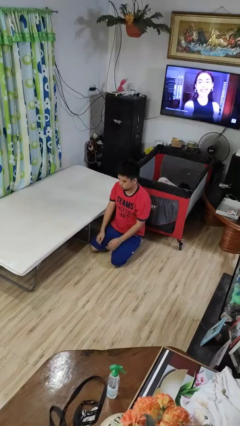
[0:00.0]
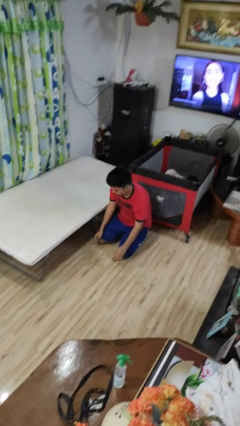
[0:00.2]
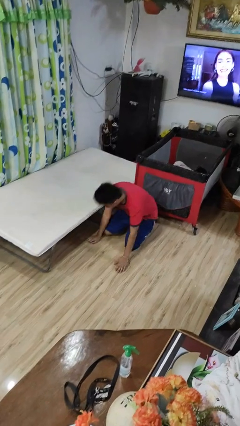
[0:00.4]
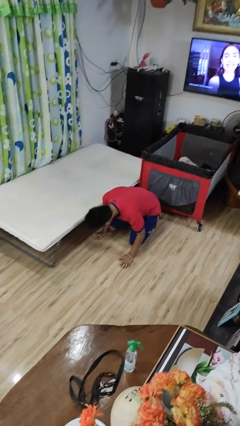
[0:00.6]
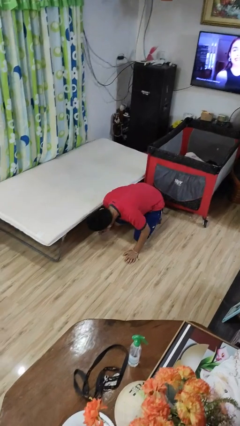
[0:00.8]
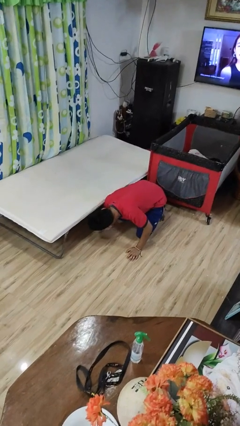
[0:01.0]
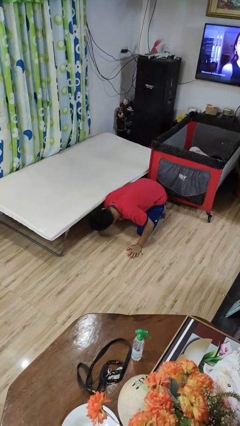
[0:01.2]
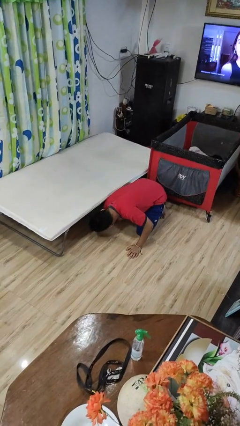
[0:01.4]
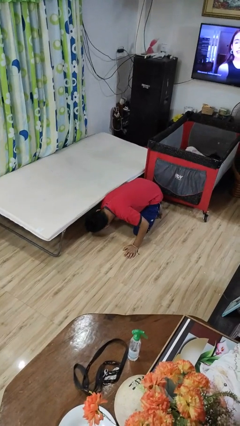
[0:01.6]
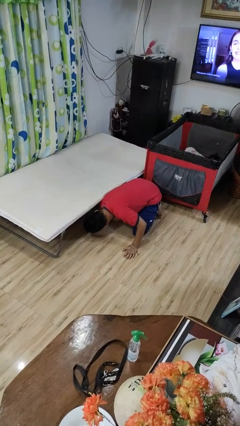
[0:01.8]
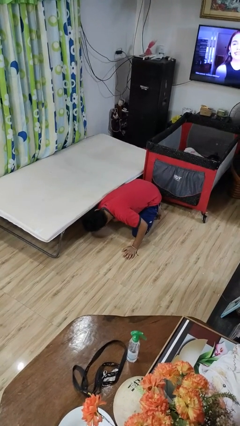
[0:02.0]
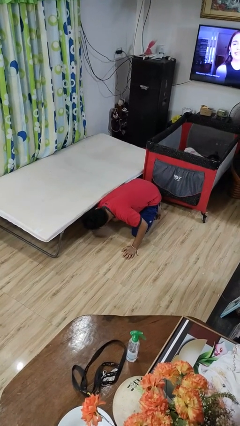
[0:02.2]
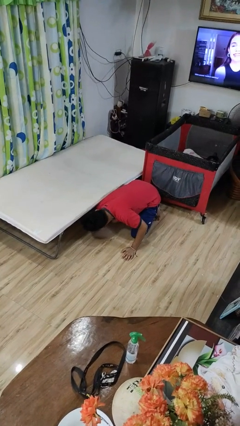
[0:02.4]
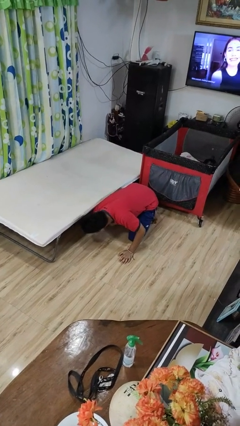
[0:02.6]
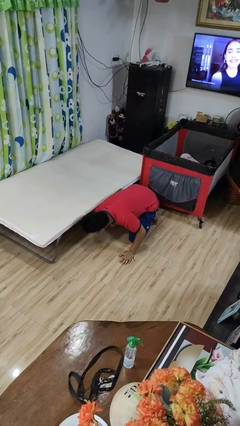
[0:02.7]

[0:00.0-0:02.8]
person searches under bed

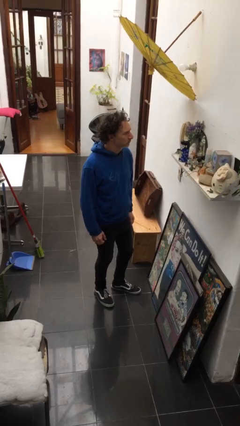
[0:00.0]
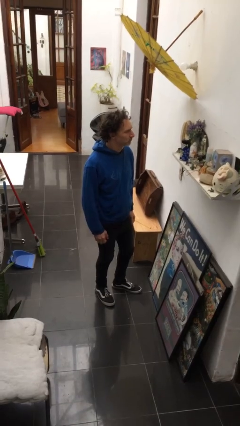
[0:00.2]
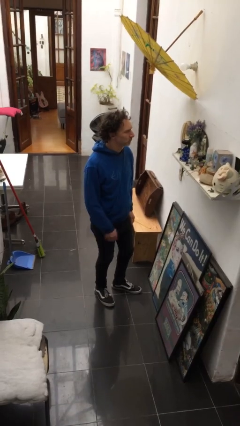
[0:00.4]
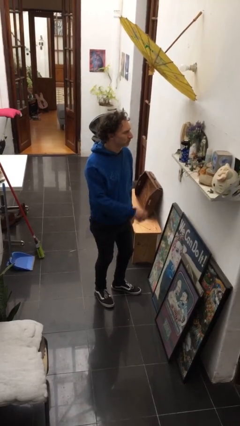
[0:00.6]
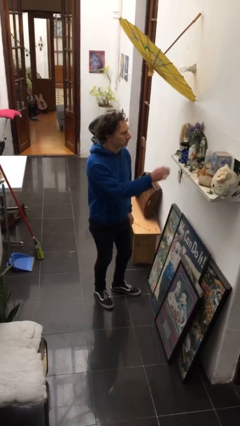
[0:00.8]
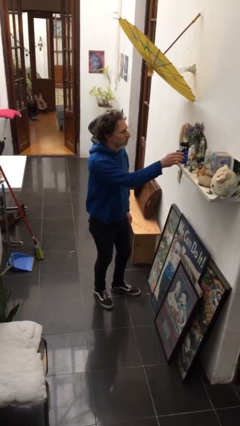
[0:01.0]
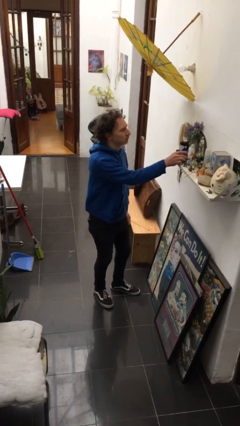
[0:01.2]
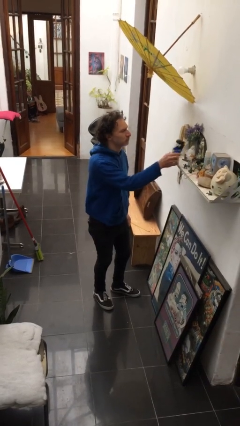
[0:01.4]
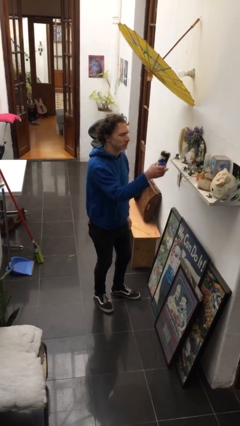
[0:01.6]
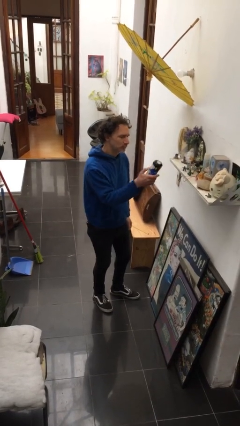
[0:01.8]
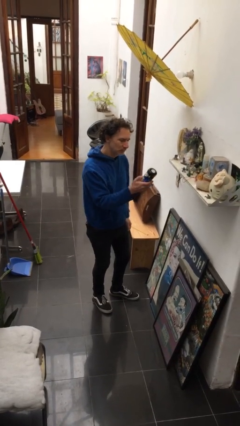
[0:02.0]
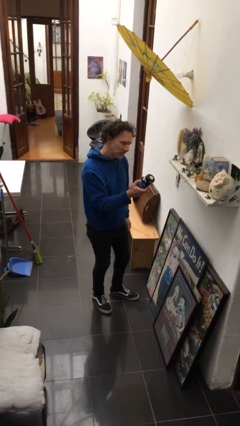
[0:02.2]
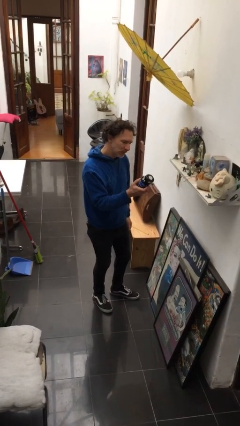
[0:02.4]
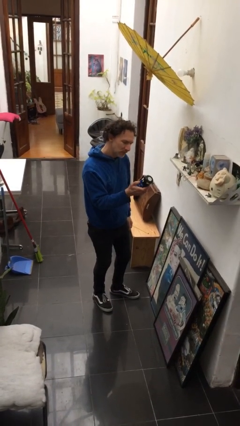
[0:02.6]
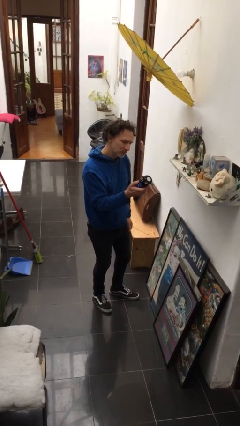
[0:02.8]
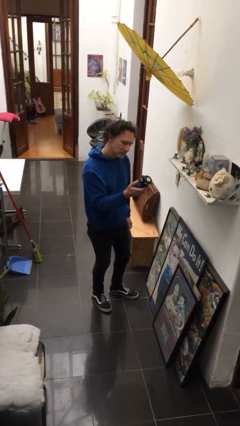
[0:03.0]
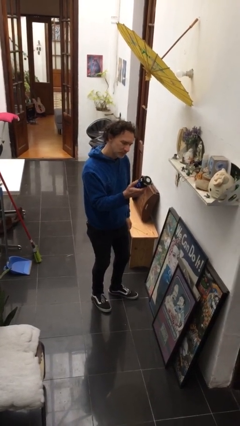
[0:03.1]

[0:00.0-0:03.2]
person picks up object from shelf

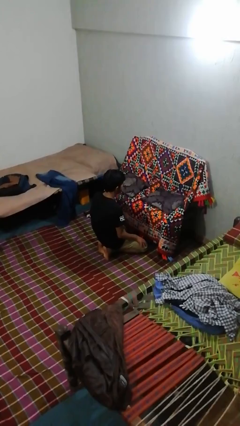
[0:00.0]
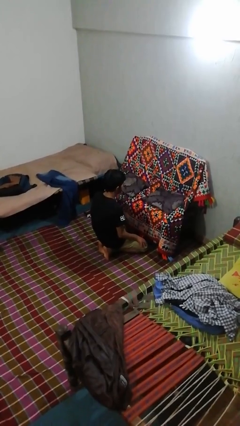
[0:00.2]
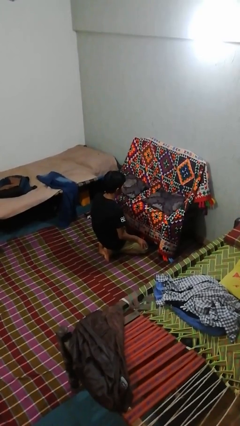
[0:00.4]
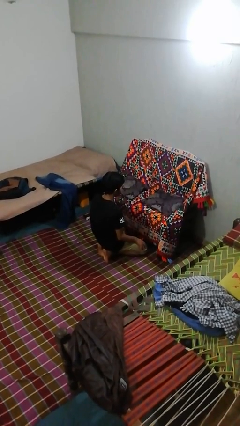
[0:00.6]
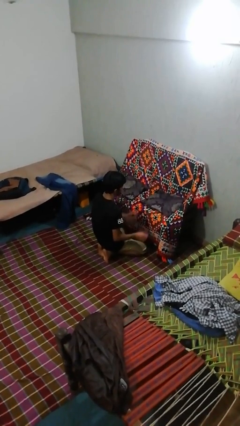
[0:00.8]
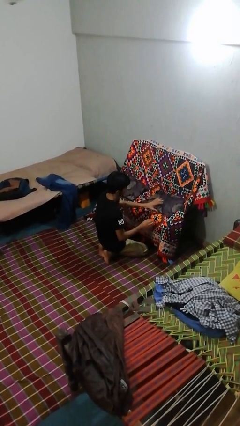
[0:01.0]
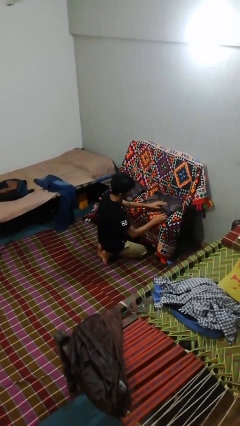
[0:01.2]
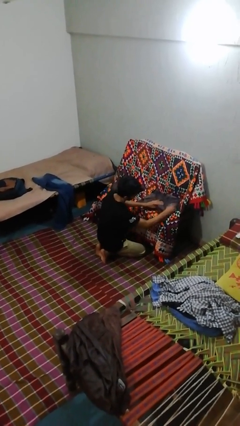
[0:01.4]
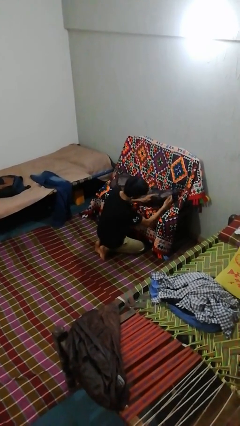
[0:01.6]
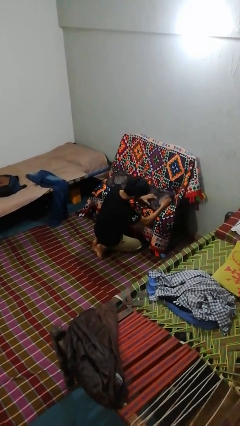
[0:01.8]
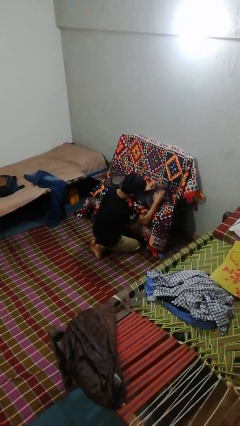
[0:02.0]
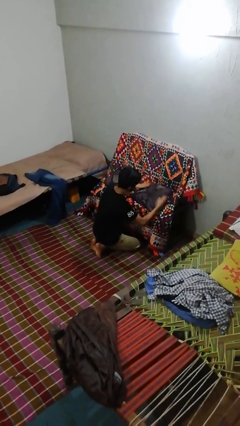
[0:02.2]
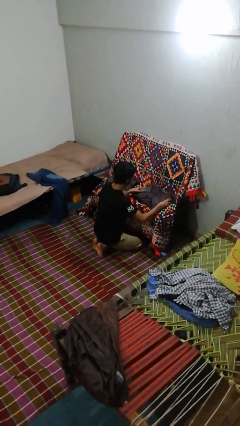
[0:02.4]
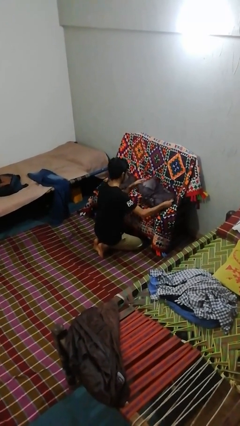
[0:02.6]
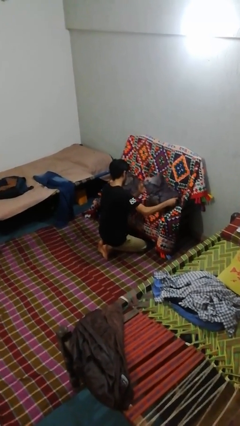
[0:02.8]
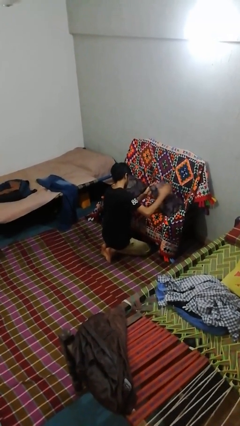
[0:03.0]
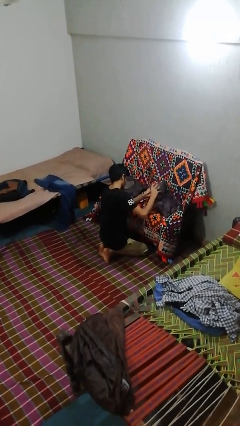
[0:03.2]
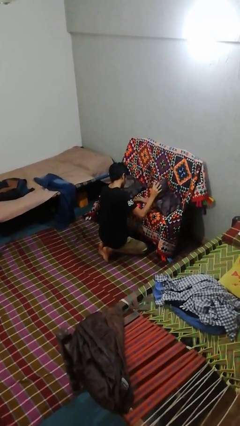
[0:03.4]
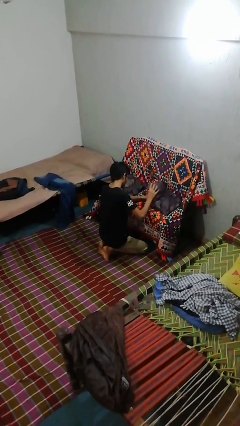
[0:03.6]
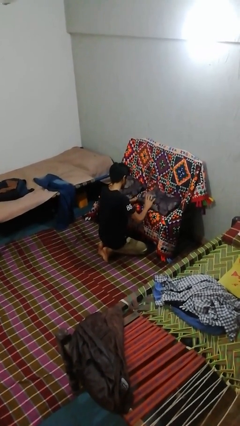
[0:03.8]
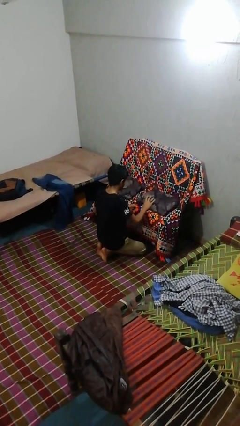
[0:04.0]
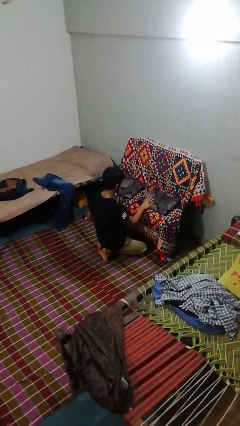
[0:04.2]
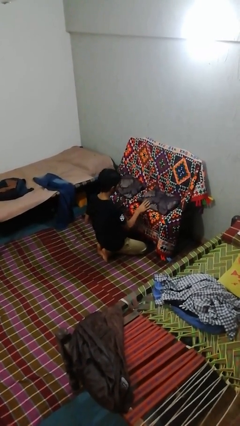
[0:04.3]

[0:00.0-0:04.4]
person searches in couch

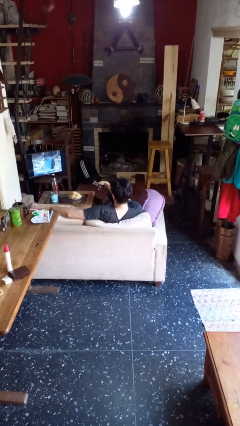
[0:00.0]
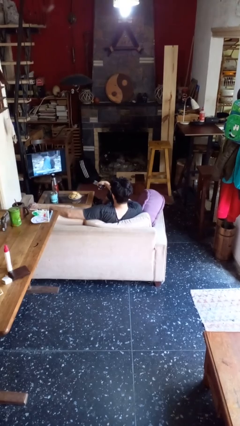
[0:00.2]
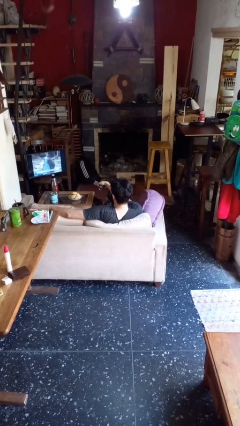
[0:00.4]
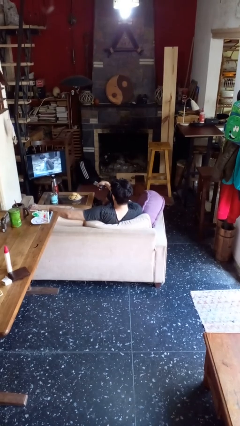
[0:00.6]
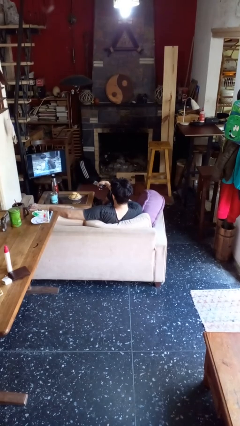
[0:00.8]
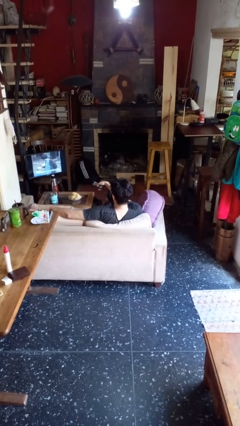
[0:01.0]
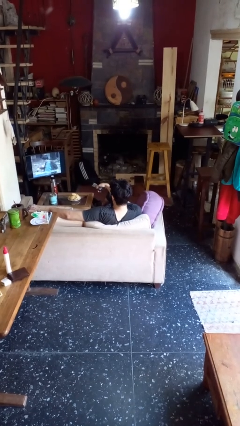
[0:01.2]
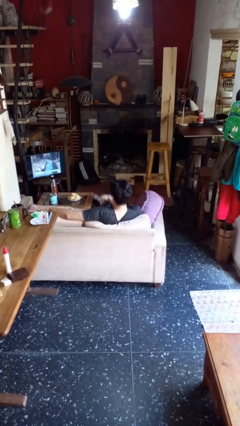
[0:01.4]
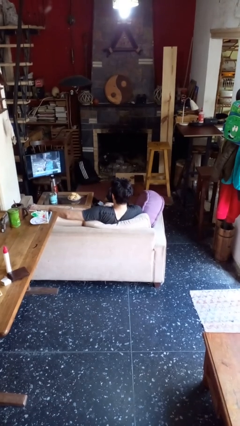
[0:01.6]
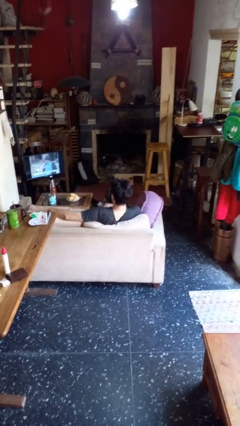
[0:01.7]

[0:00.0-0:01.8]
person uses television remote

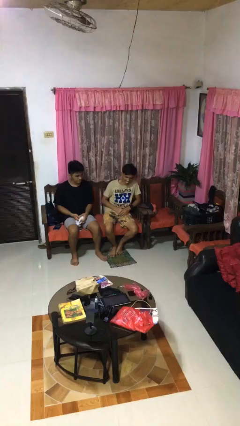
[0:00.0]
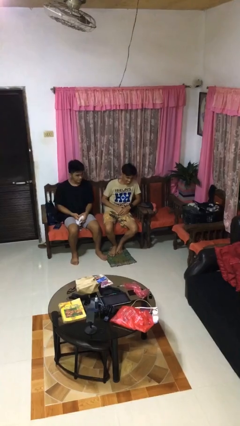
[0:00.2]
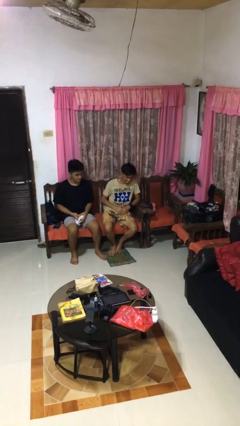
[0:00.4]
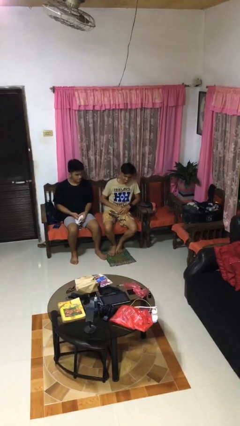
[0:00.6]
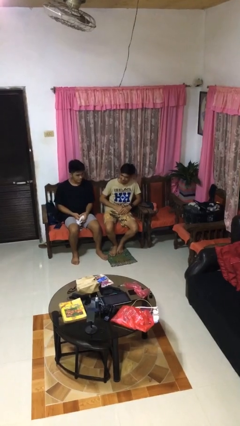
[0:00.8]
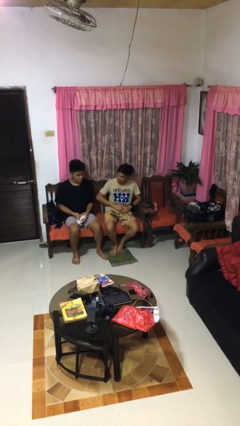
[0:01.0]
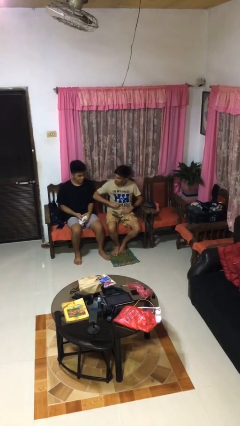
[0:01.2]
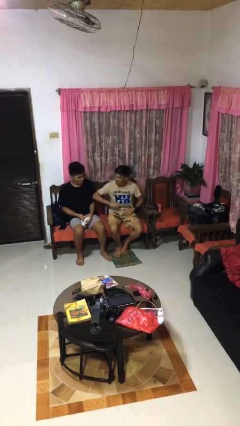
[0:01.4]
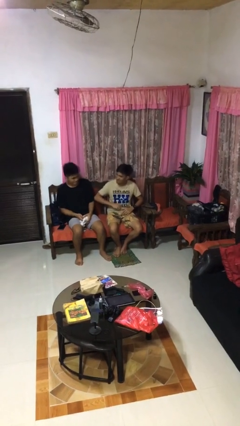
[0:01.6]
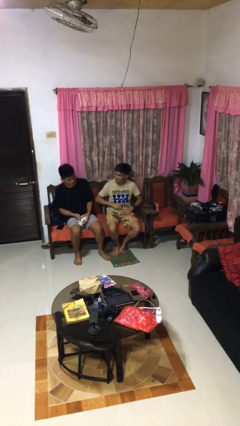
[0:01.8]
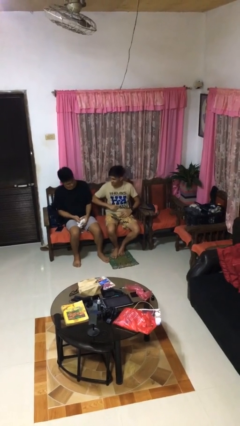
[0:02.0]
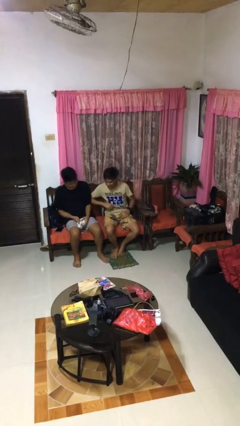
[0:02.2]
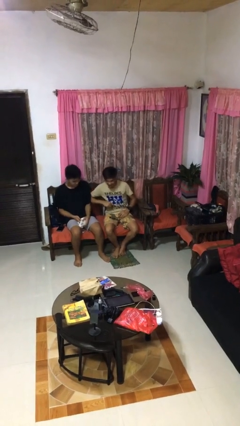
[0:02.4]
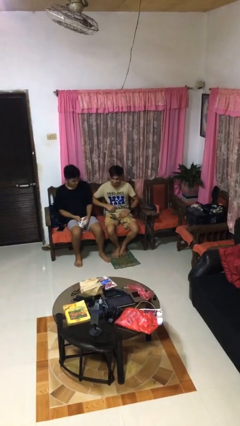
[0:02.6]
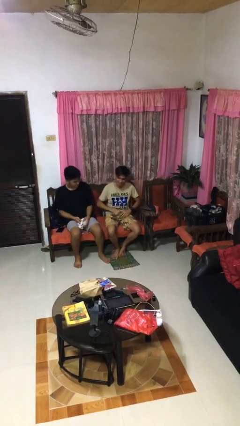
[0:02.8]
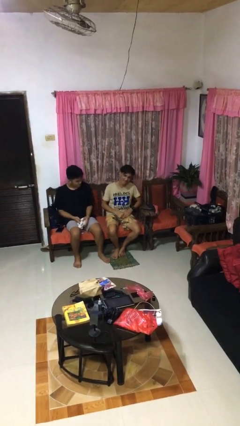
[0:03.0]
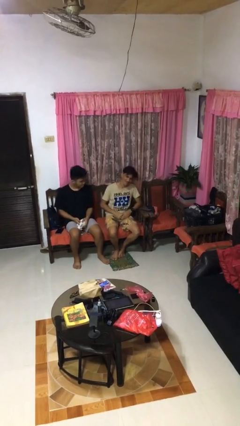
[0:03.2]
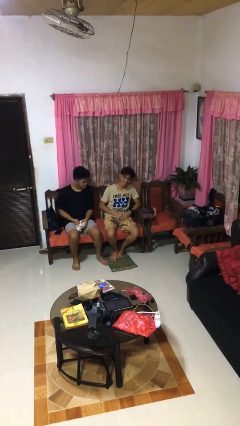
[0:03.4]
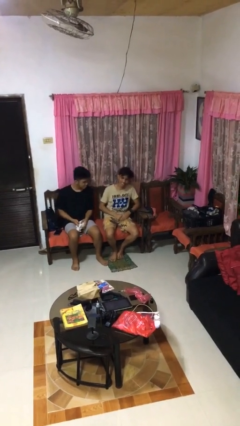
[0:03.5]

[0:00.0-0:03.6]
person nudges person with elbow

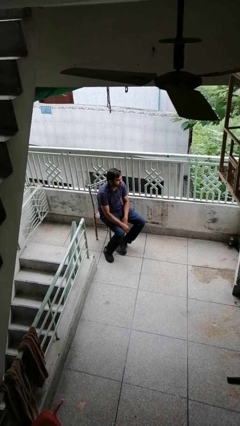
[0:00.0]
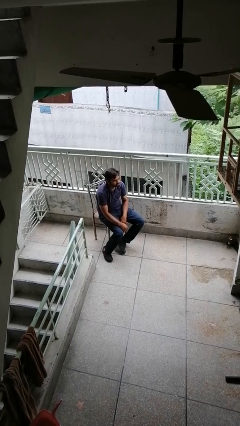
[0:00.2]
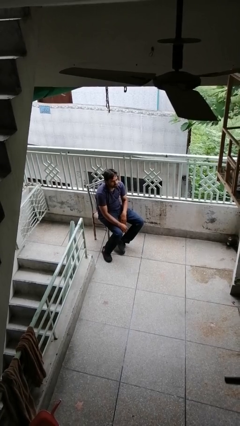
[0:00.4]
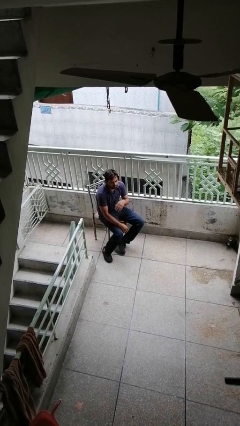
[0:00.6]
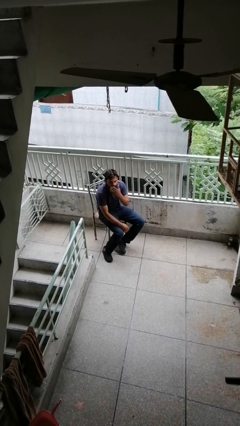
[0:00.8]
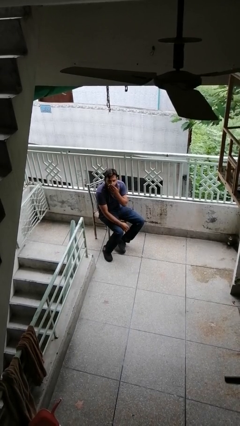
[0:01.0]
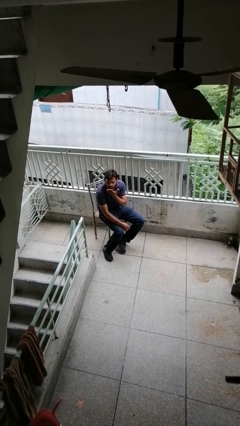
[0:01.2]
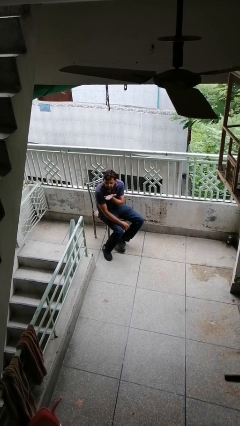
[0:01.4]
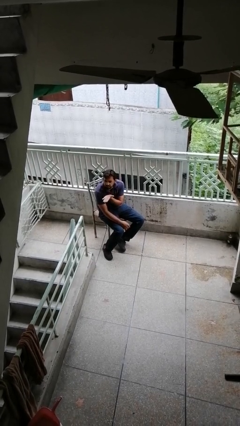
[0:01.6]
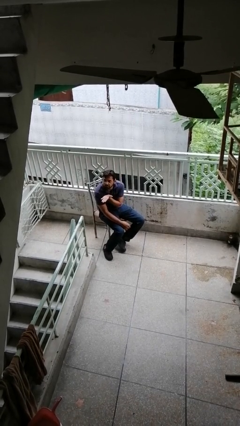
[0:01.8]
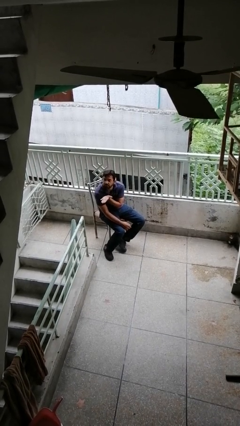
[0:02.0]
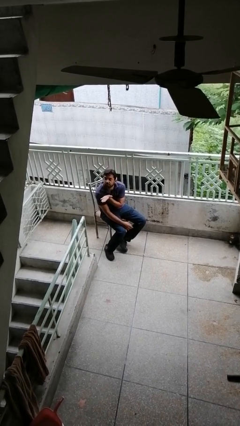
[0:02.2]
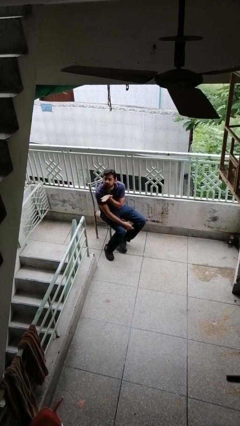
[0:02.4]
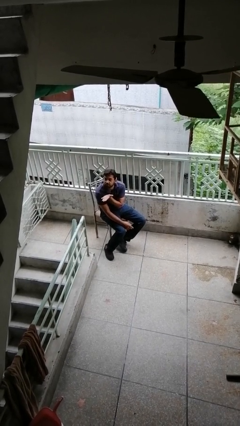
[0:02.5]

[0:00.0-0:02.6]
person gestures blow kiss
